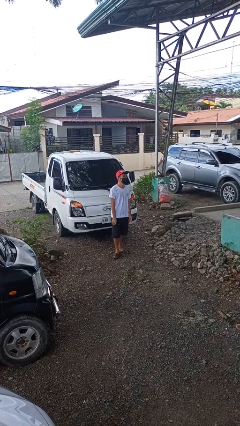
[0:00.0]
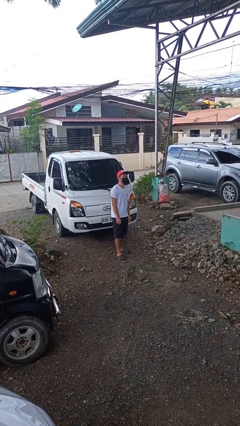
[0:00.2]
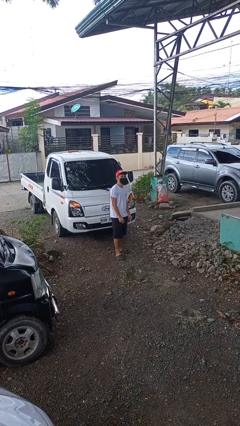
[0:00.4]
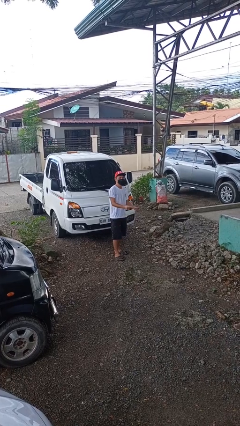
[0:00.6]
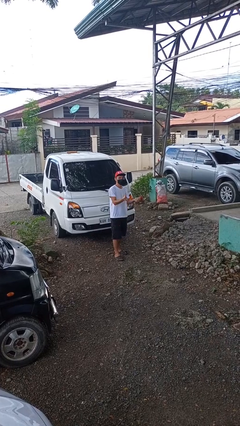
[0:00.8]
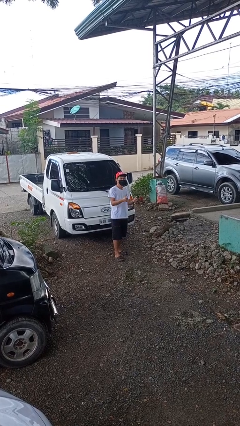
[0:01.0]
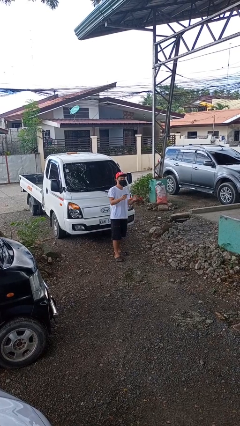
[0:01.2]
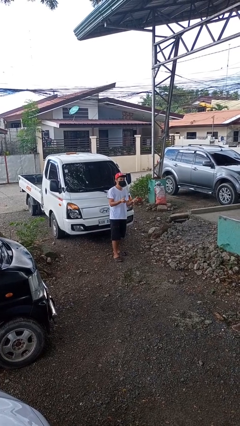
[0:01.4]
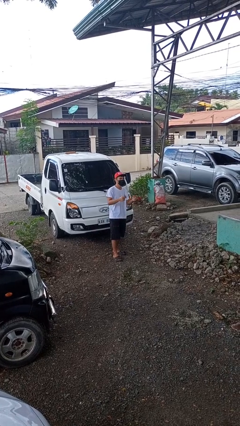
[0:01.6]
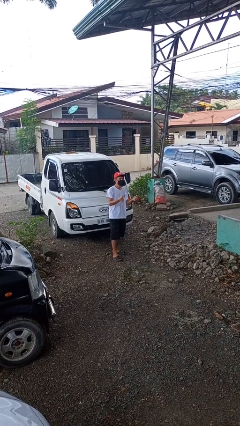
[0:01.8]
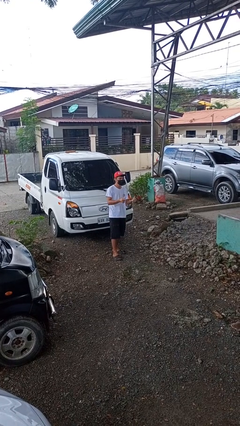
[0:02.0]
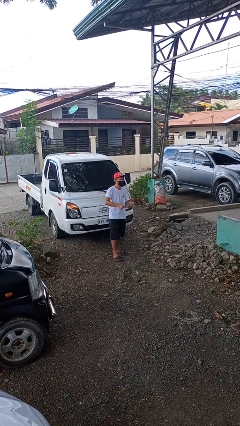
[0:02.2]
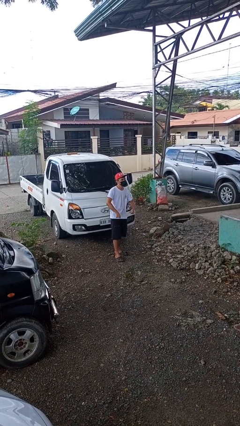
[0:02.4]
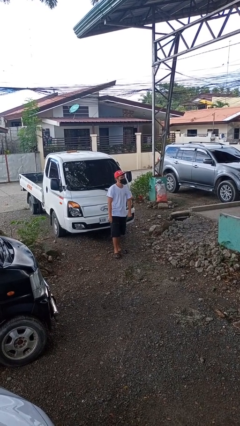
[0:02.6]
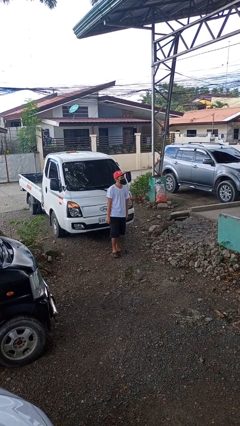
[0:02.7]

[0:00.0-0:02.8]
person snaps fingers

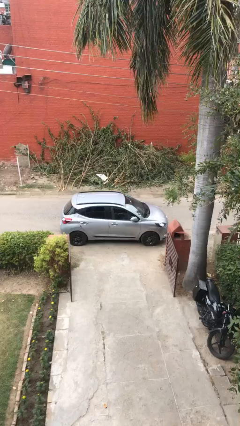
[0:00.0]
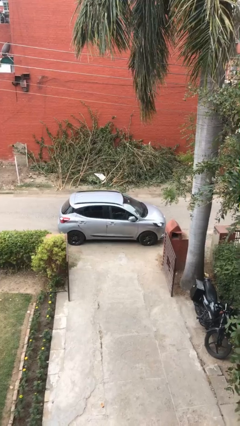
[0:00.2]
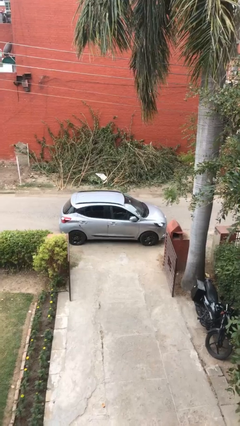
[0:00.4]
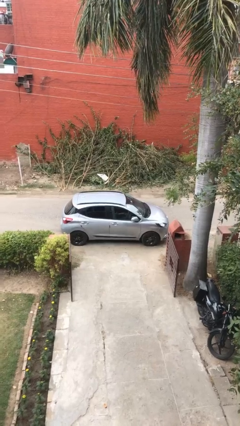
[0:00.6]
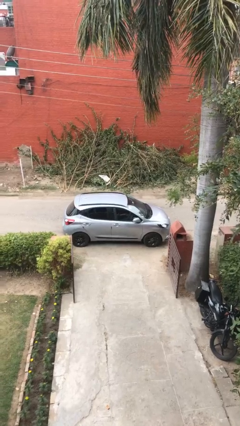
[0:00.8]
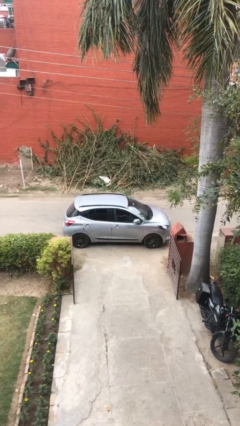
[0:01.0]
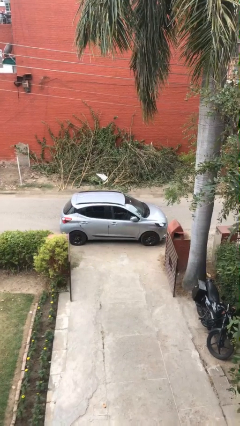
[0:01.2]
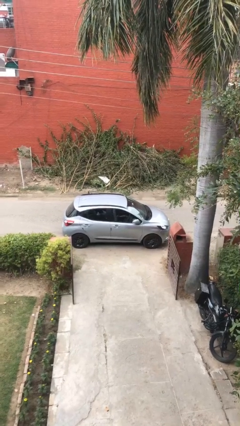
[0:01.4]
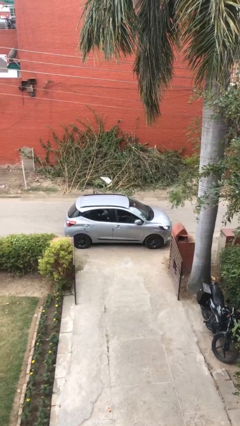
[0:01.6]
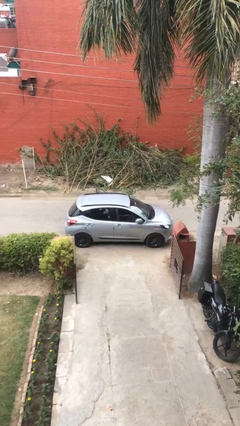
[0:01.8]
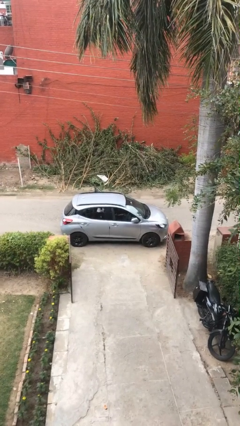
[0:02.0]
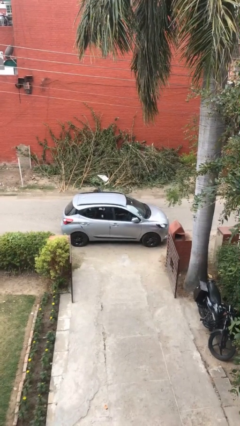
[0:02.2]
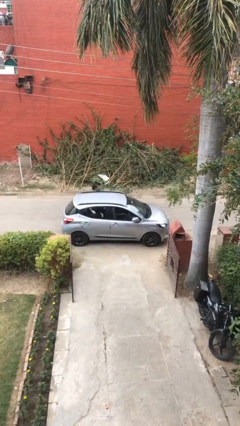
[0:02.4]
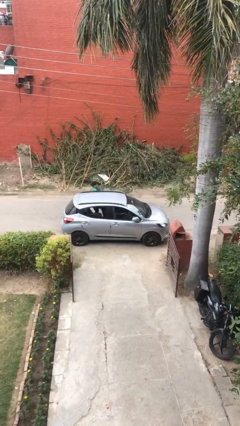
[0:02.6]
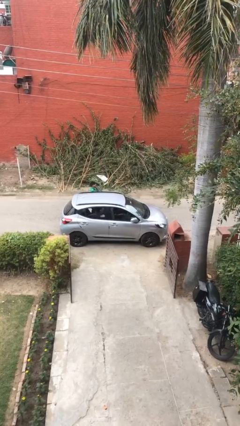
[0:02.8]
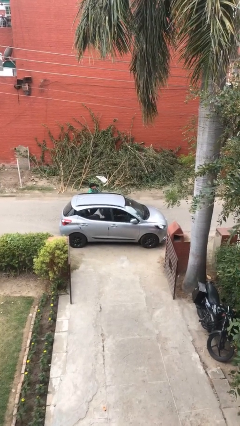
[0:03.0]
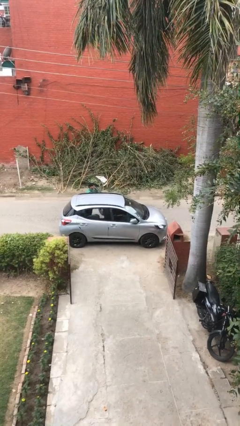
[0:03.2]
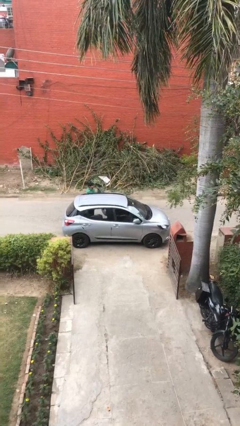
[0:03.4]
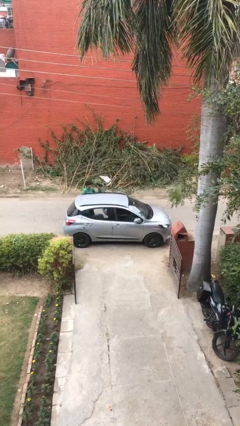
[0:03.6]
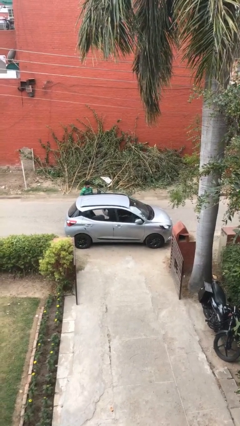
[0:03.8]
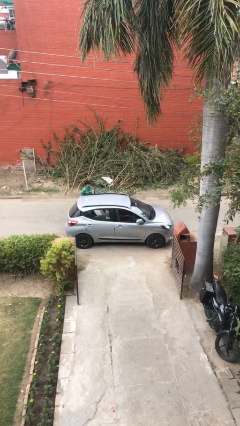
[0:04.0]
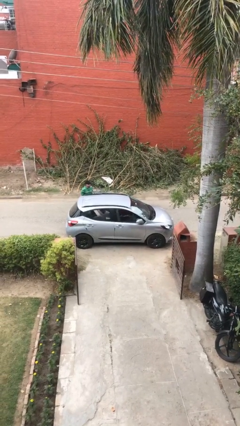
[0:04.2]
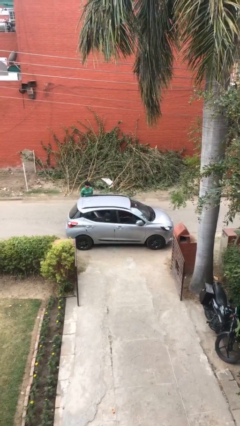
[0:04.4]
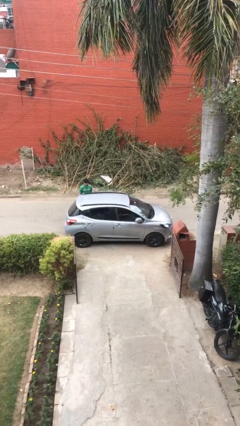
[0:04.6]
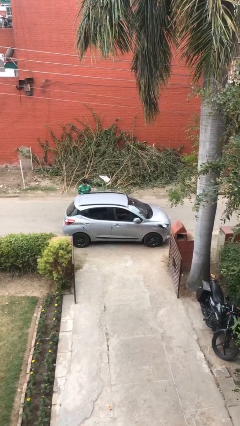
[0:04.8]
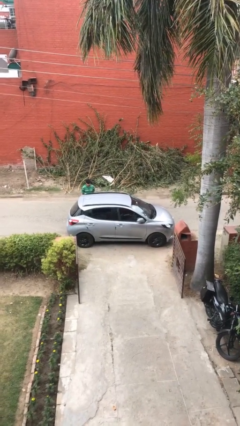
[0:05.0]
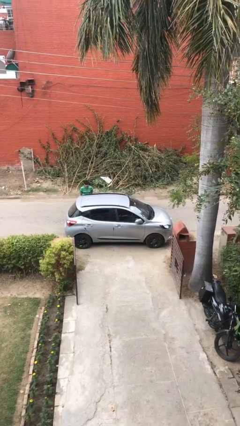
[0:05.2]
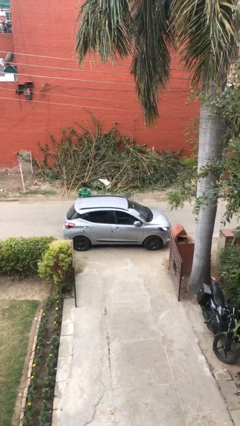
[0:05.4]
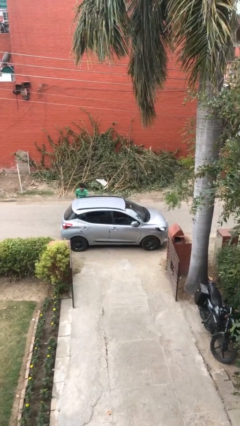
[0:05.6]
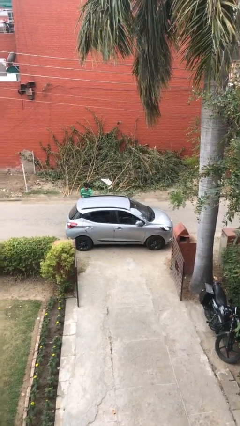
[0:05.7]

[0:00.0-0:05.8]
car drops off person

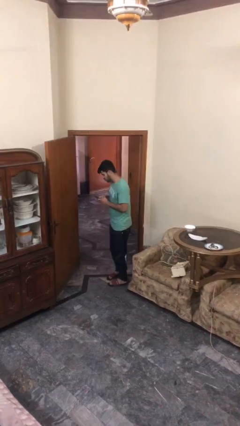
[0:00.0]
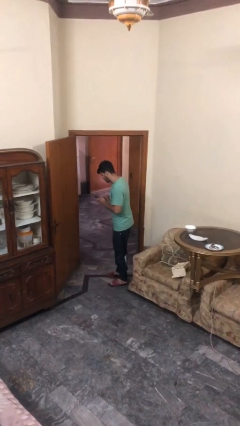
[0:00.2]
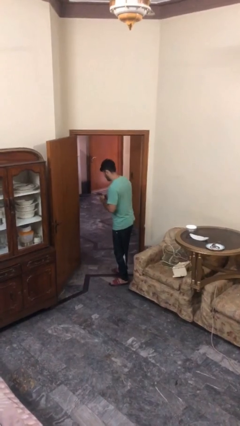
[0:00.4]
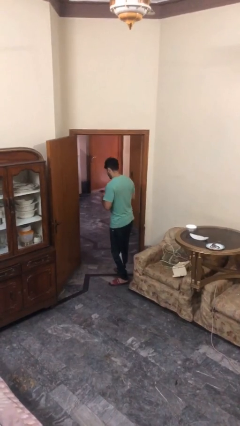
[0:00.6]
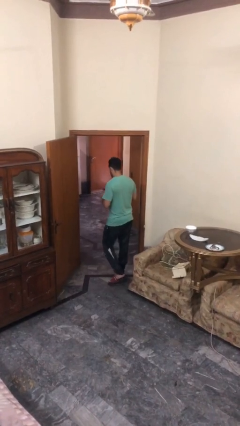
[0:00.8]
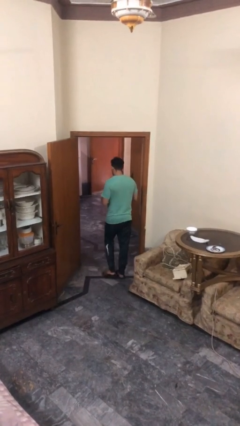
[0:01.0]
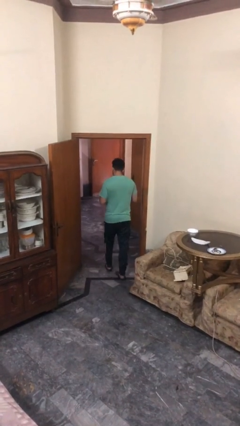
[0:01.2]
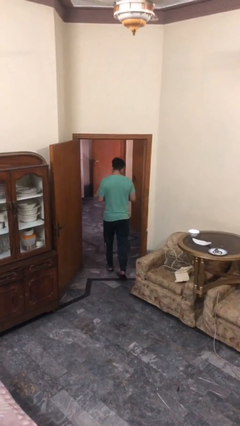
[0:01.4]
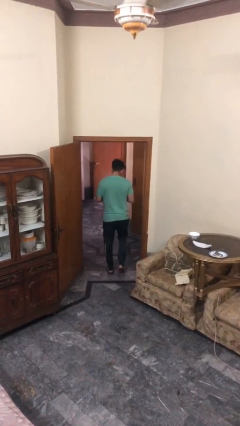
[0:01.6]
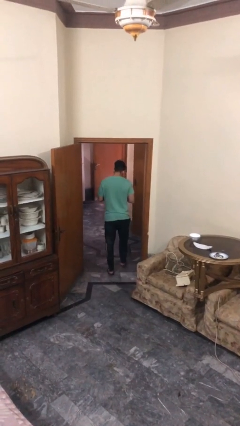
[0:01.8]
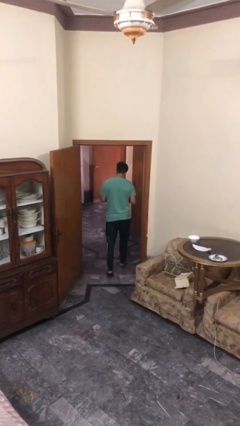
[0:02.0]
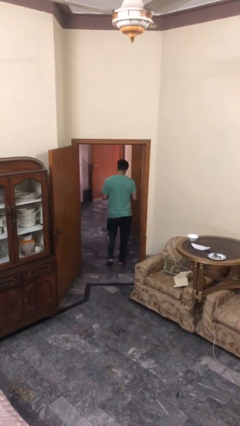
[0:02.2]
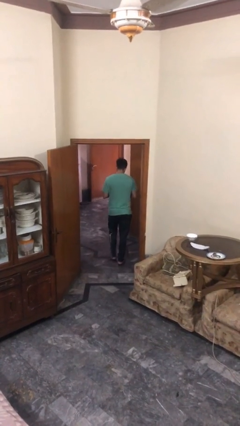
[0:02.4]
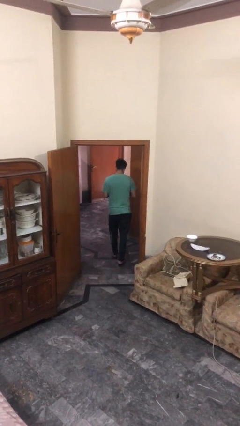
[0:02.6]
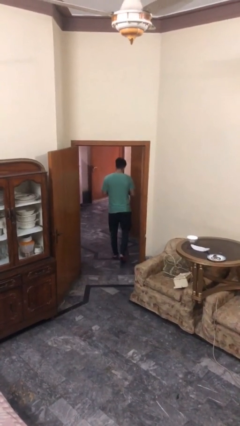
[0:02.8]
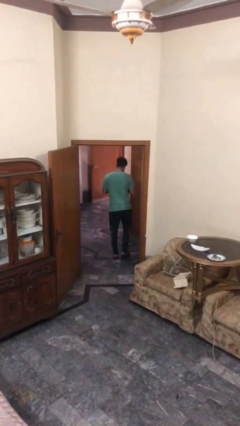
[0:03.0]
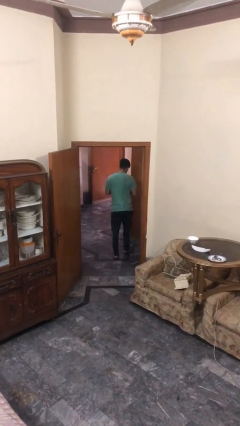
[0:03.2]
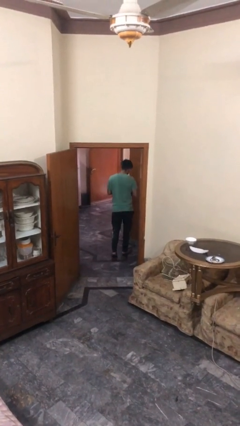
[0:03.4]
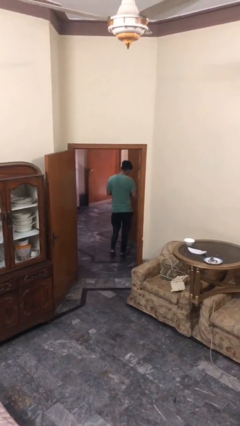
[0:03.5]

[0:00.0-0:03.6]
person exits scene through structure

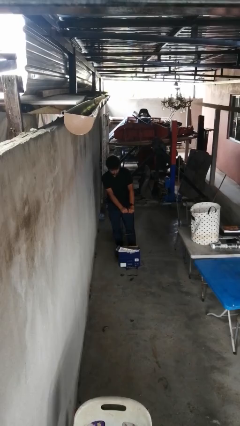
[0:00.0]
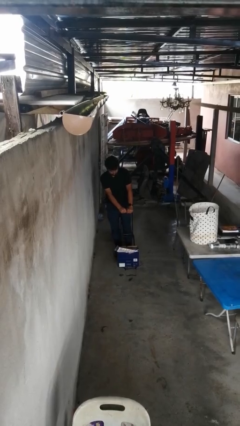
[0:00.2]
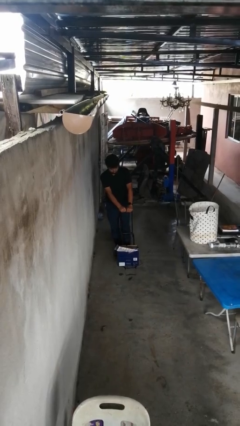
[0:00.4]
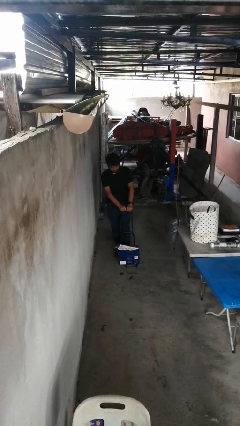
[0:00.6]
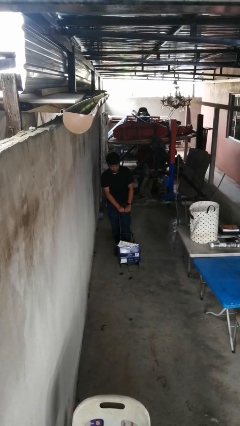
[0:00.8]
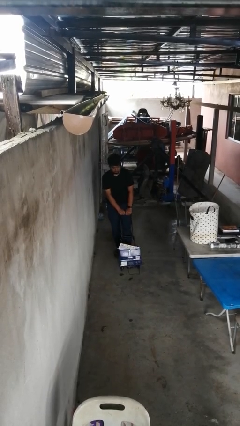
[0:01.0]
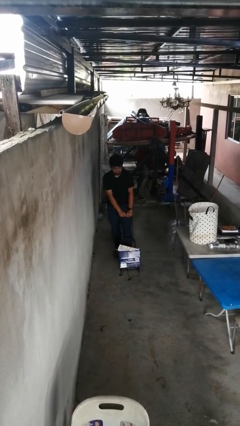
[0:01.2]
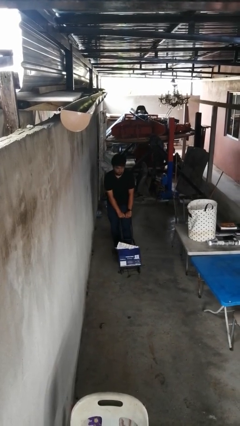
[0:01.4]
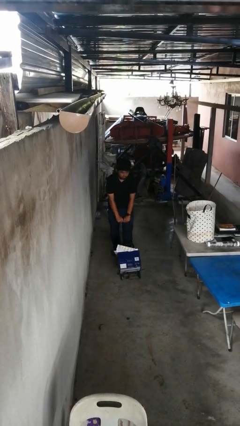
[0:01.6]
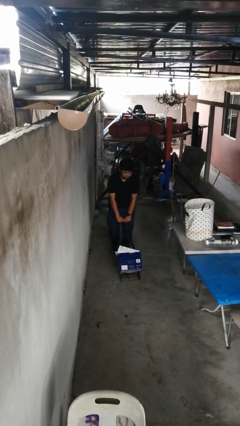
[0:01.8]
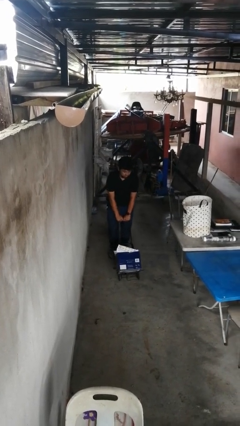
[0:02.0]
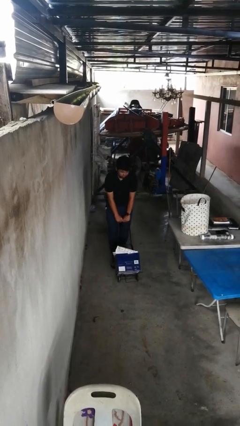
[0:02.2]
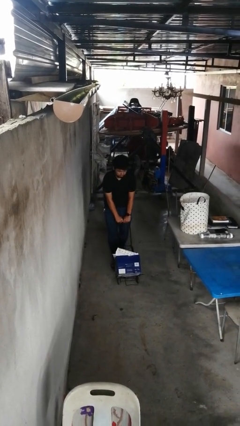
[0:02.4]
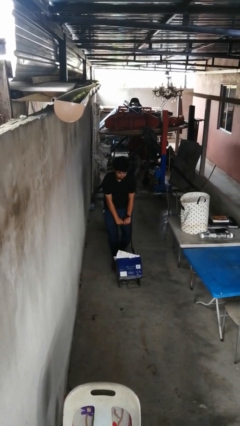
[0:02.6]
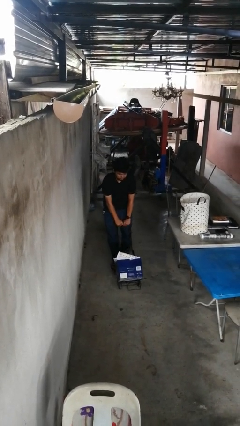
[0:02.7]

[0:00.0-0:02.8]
person pushes wheeled cart

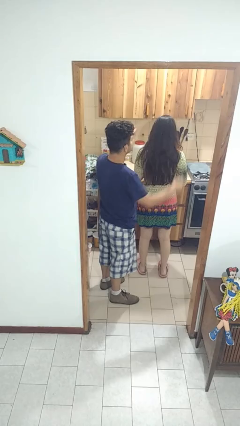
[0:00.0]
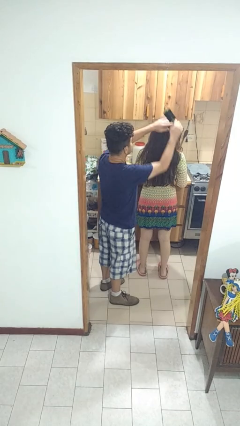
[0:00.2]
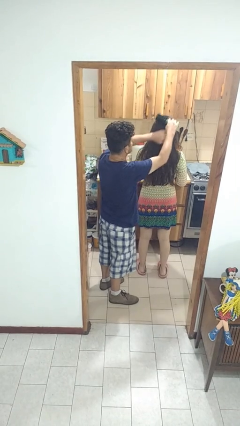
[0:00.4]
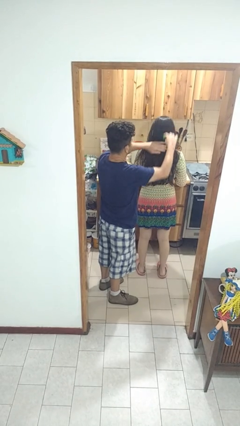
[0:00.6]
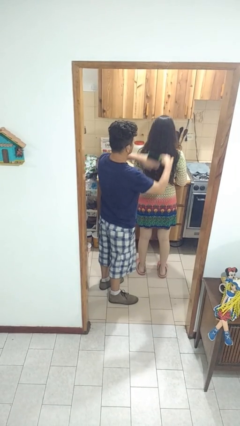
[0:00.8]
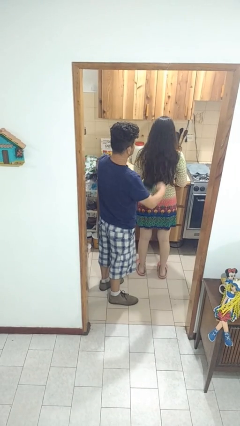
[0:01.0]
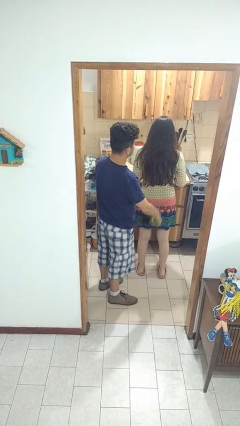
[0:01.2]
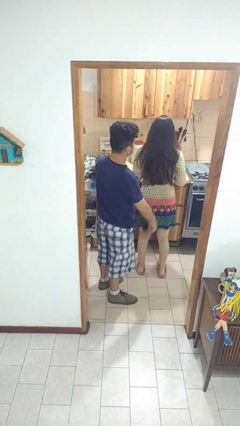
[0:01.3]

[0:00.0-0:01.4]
person brushes hair of person

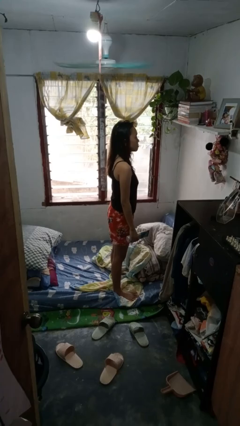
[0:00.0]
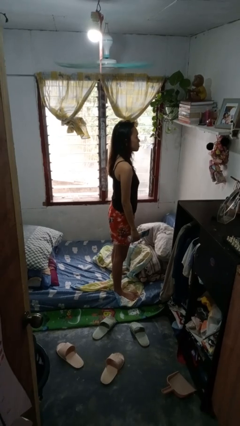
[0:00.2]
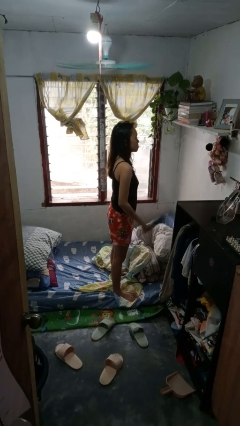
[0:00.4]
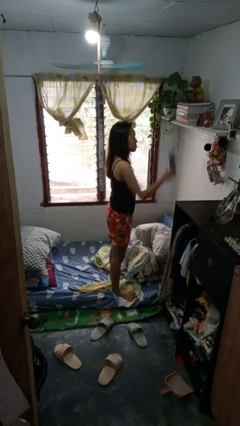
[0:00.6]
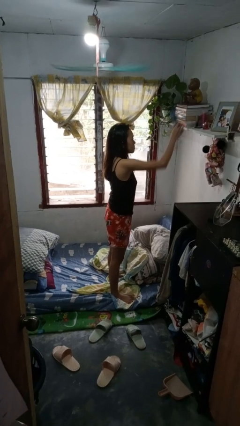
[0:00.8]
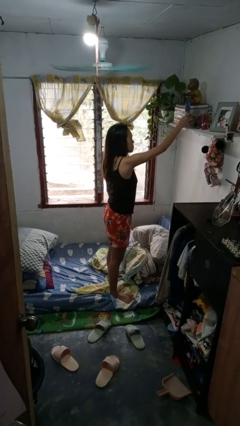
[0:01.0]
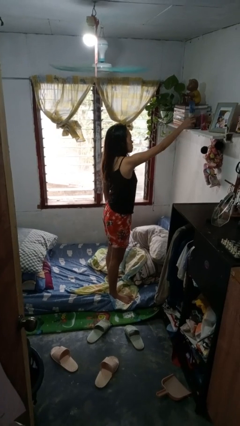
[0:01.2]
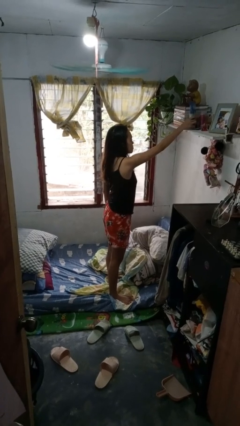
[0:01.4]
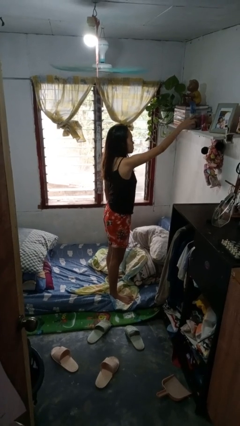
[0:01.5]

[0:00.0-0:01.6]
person puts down object on shelf
